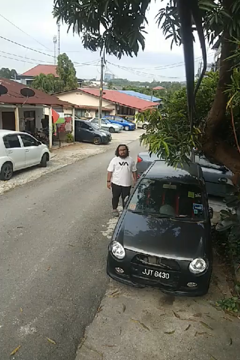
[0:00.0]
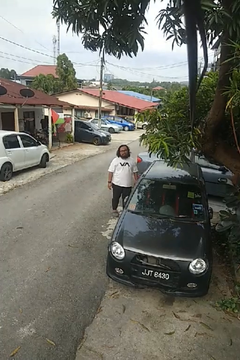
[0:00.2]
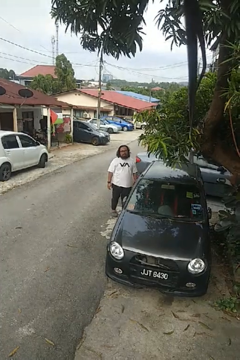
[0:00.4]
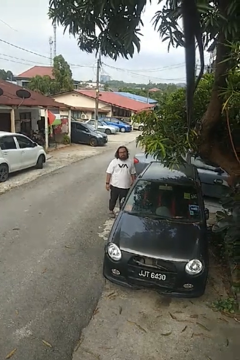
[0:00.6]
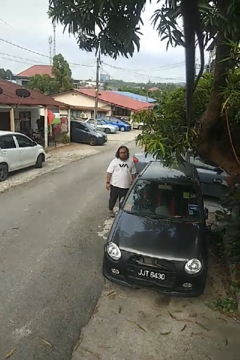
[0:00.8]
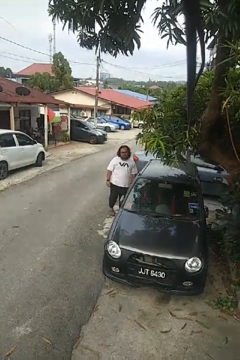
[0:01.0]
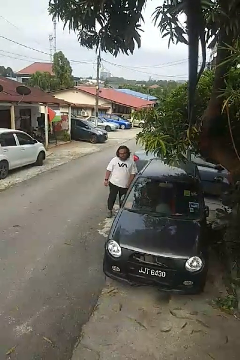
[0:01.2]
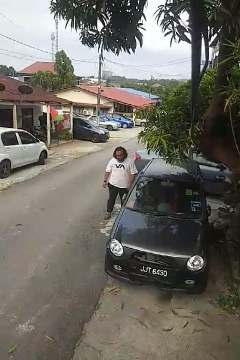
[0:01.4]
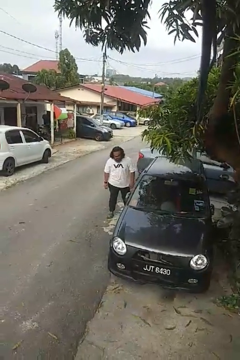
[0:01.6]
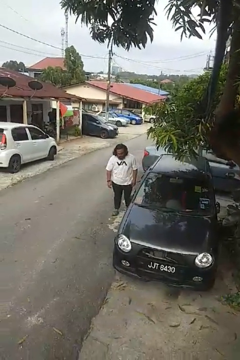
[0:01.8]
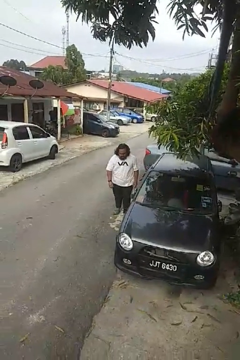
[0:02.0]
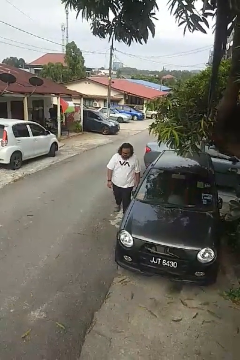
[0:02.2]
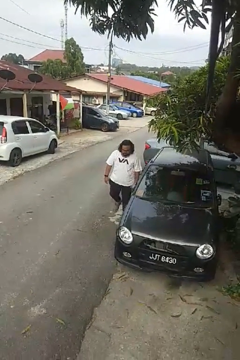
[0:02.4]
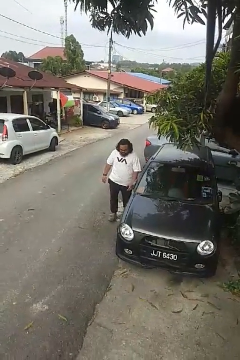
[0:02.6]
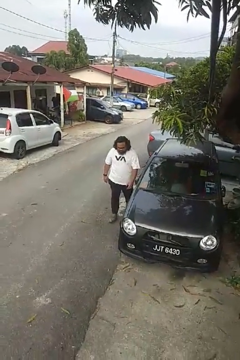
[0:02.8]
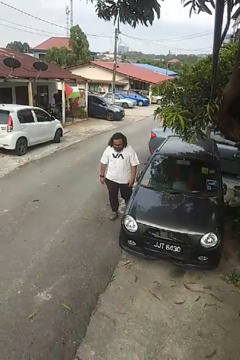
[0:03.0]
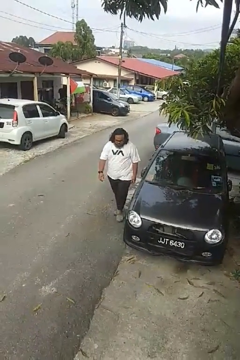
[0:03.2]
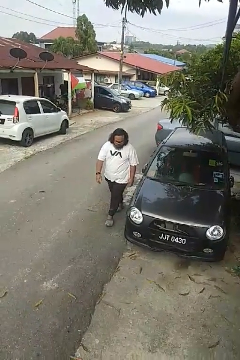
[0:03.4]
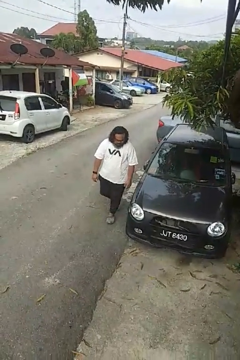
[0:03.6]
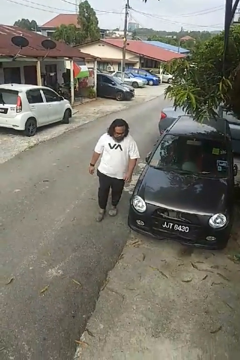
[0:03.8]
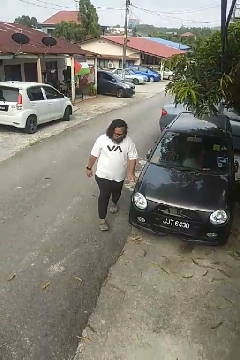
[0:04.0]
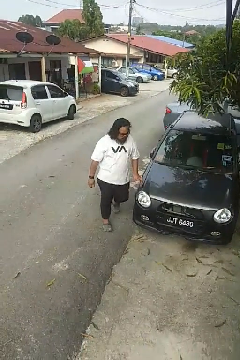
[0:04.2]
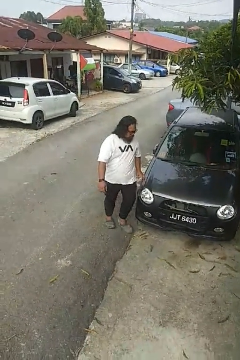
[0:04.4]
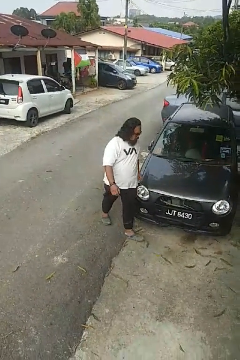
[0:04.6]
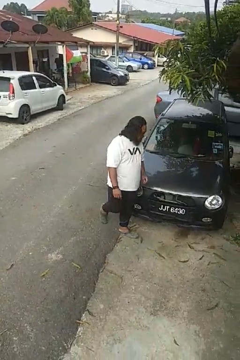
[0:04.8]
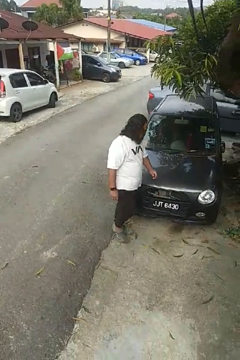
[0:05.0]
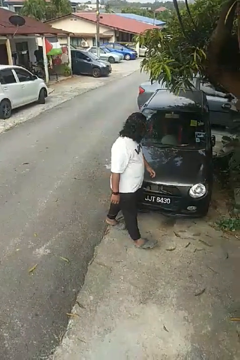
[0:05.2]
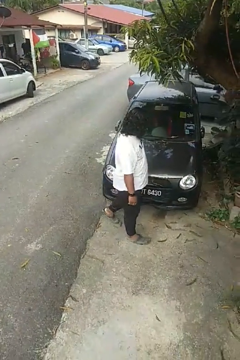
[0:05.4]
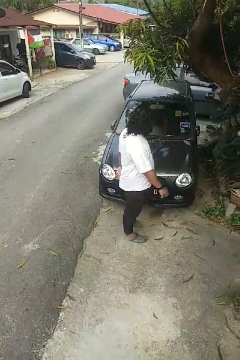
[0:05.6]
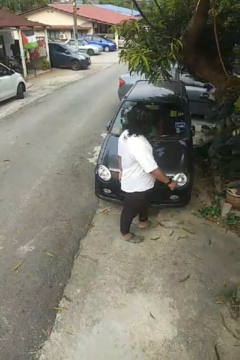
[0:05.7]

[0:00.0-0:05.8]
person walks around car

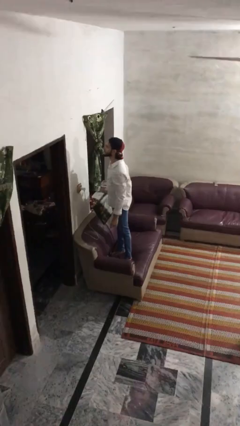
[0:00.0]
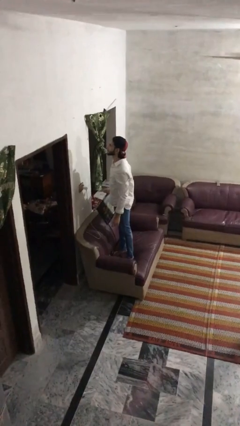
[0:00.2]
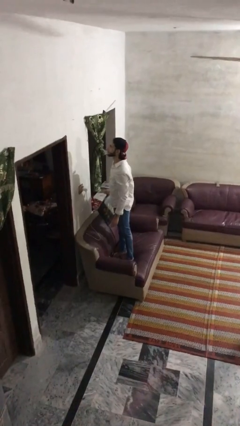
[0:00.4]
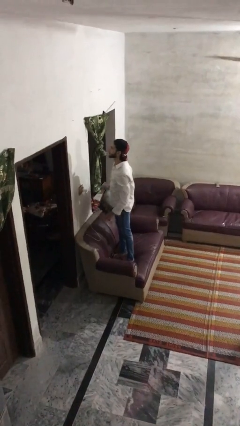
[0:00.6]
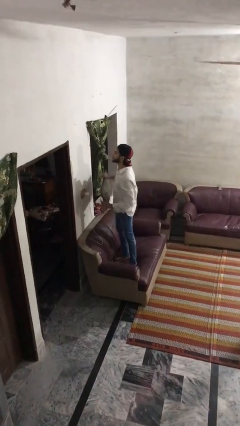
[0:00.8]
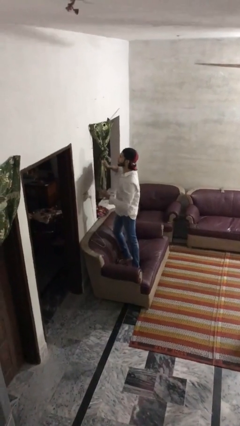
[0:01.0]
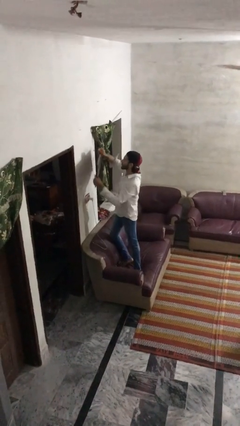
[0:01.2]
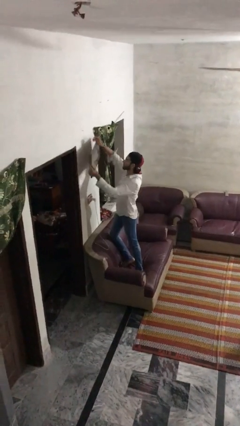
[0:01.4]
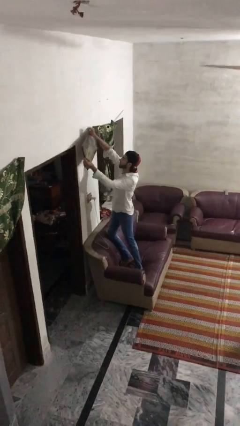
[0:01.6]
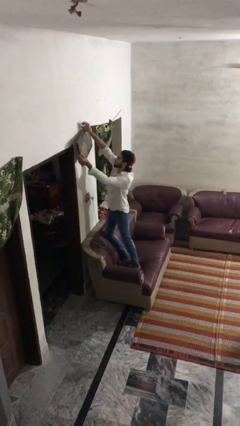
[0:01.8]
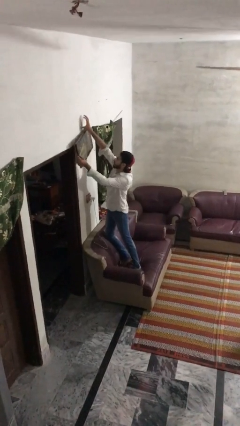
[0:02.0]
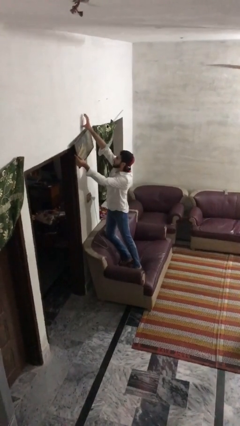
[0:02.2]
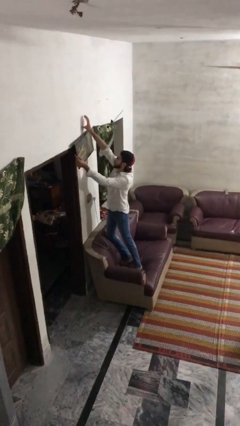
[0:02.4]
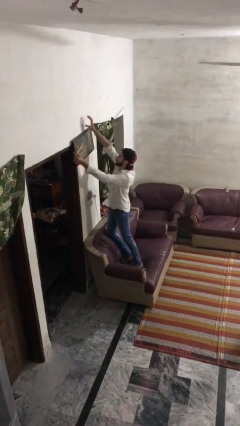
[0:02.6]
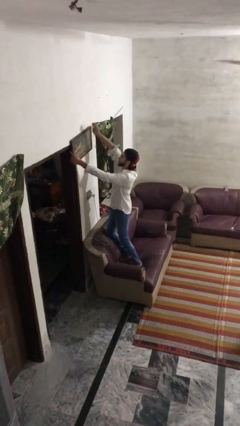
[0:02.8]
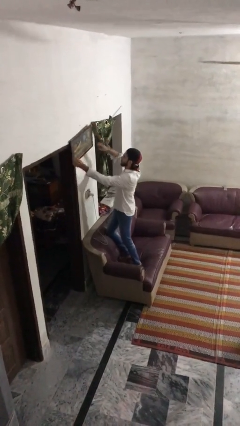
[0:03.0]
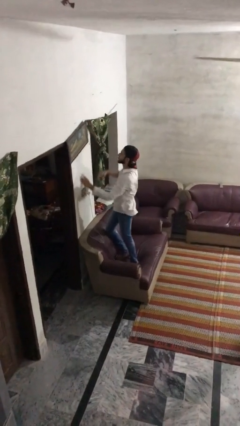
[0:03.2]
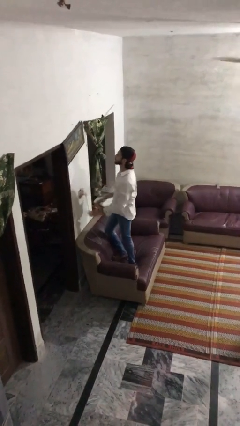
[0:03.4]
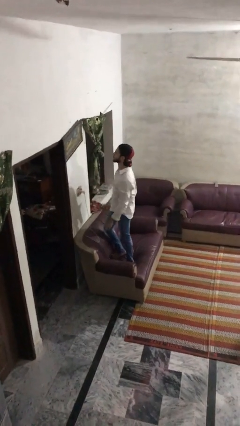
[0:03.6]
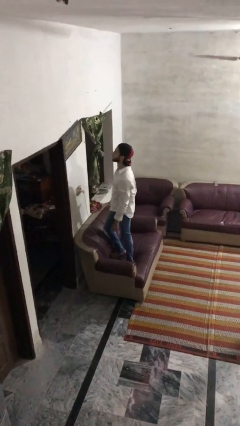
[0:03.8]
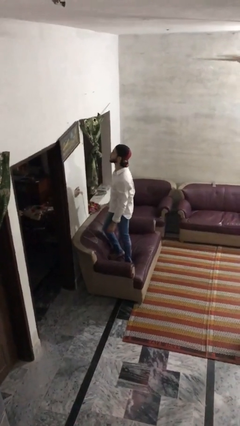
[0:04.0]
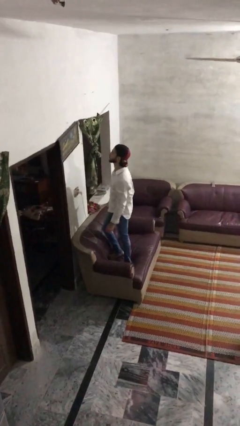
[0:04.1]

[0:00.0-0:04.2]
person puts up picture frame

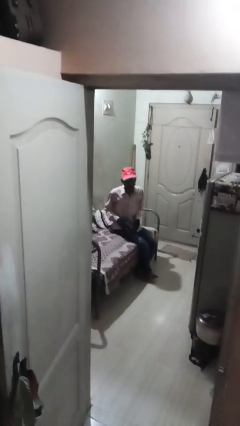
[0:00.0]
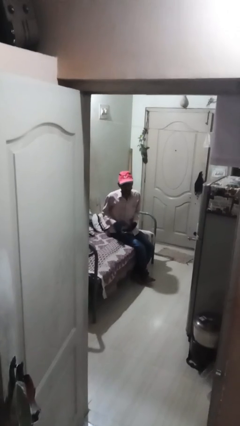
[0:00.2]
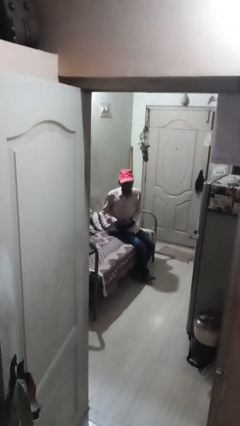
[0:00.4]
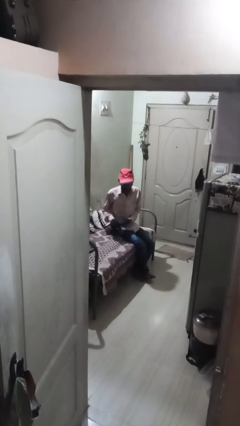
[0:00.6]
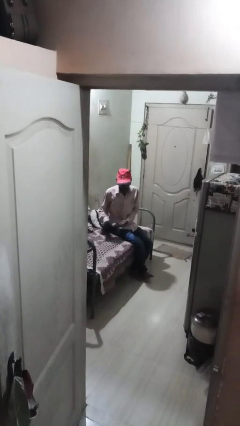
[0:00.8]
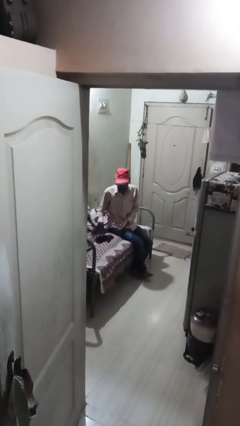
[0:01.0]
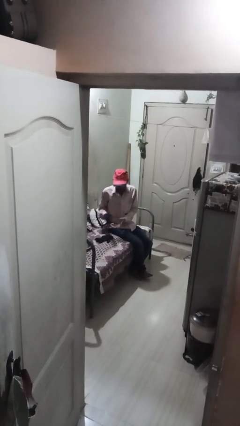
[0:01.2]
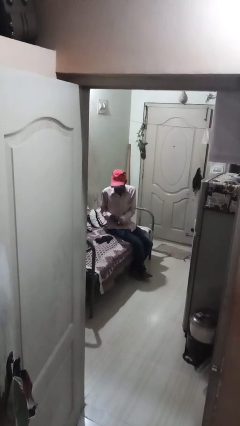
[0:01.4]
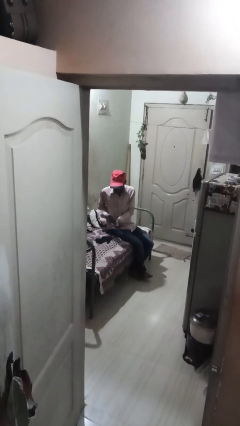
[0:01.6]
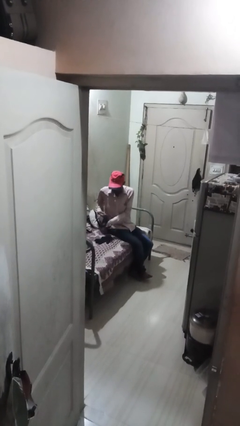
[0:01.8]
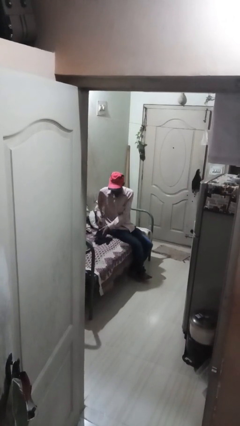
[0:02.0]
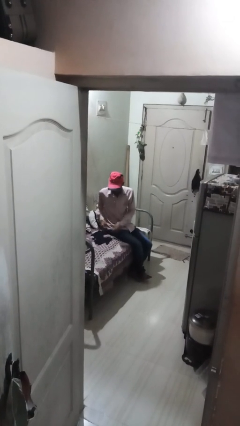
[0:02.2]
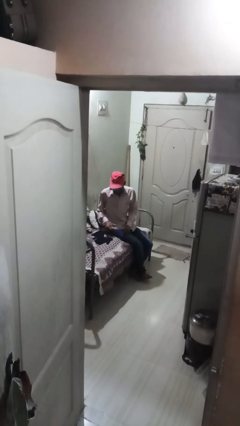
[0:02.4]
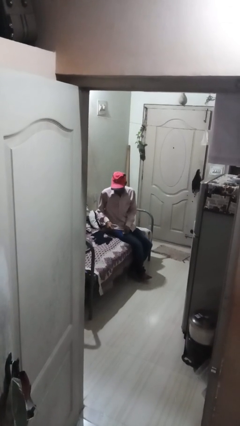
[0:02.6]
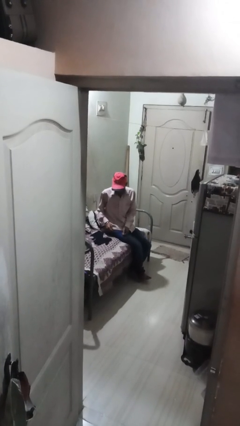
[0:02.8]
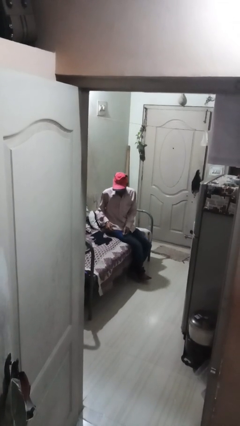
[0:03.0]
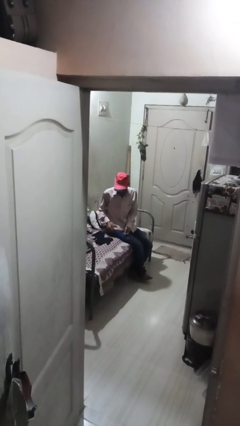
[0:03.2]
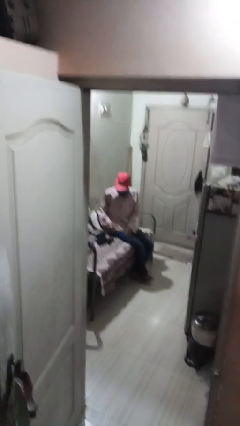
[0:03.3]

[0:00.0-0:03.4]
person takes off gloves

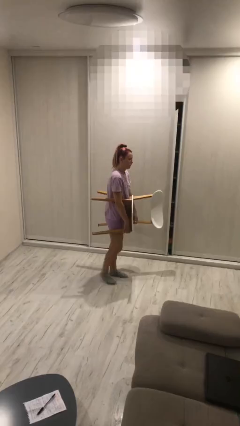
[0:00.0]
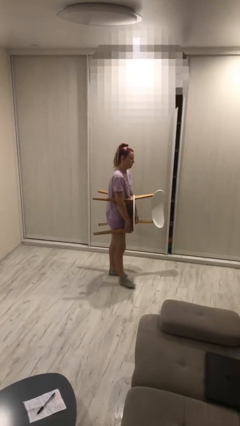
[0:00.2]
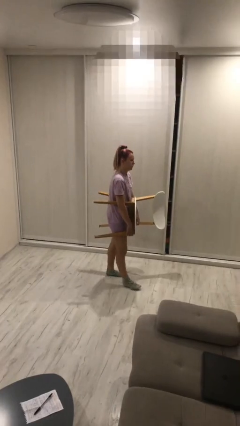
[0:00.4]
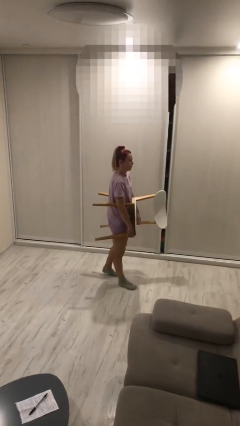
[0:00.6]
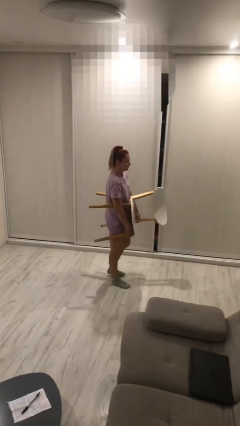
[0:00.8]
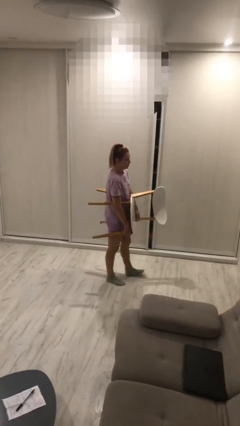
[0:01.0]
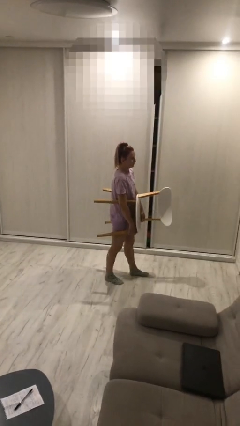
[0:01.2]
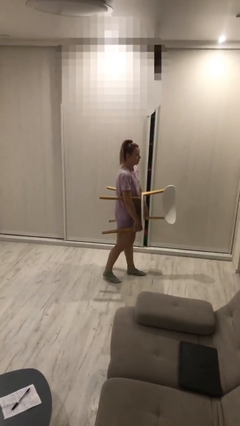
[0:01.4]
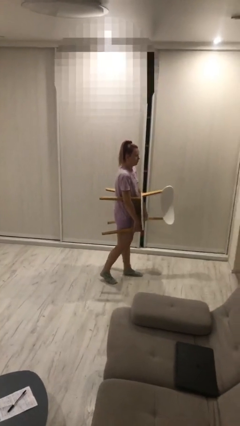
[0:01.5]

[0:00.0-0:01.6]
person carries furniture

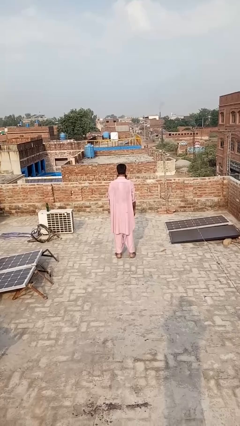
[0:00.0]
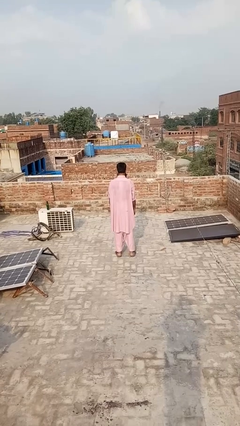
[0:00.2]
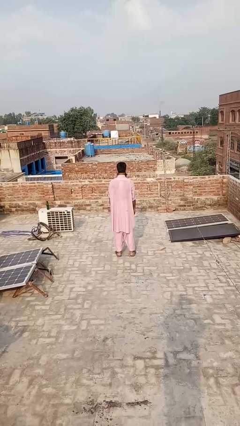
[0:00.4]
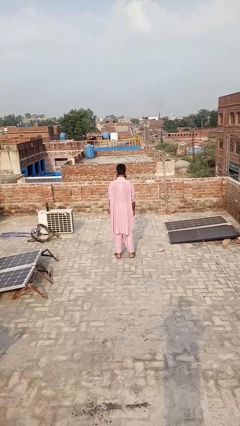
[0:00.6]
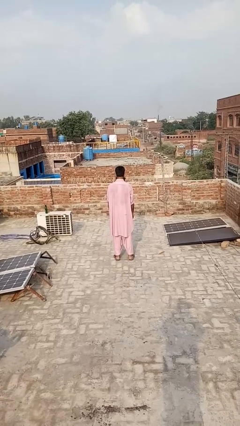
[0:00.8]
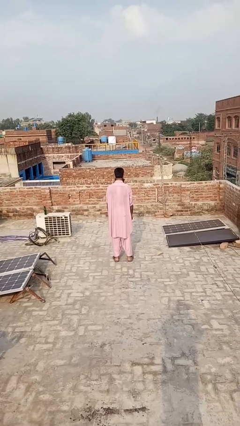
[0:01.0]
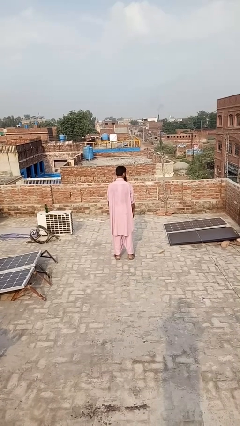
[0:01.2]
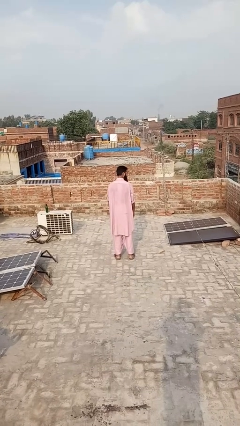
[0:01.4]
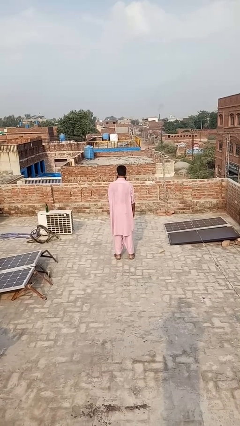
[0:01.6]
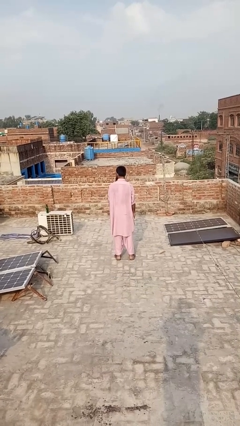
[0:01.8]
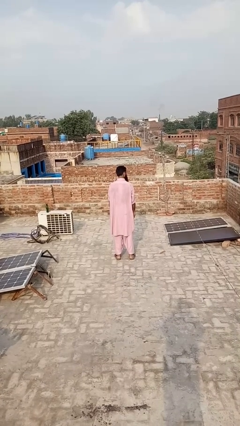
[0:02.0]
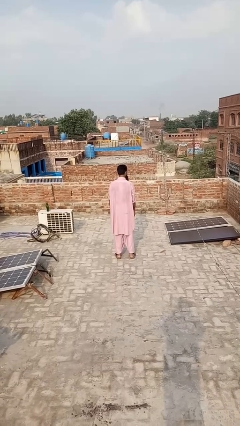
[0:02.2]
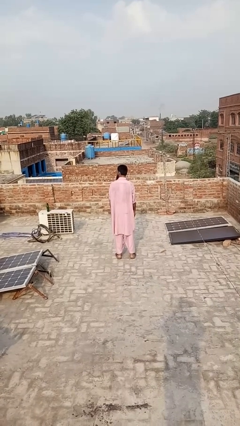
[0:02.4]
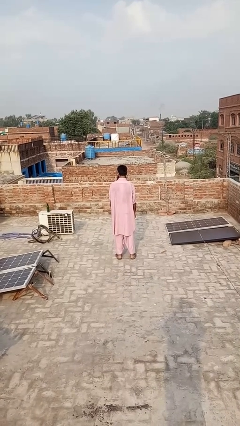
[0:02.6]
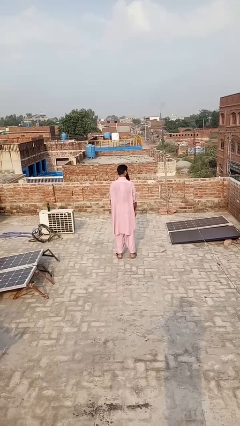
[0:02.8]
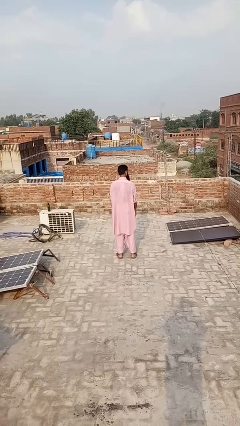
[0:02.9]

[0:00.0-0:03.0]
person shakes head

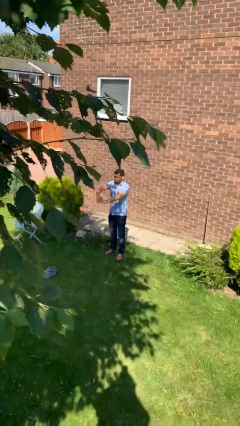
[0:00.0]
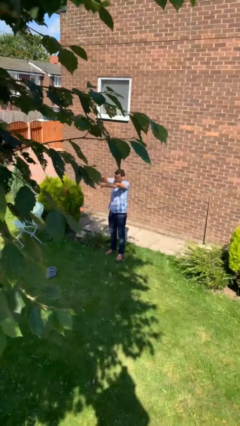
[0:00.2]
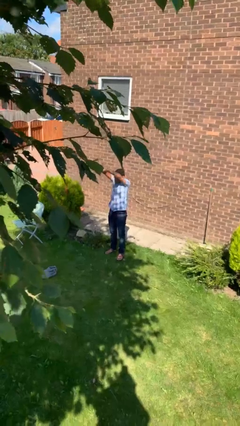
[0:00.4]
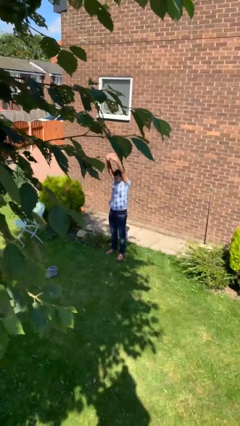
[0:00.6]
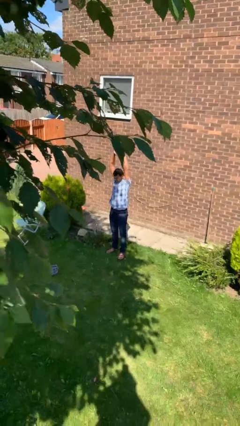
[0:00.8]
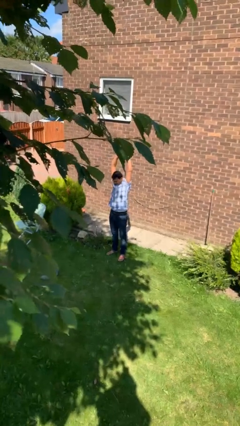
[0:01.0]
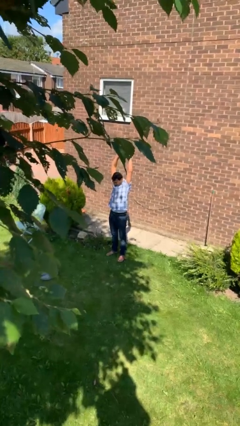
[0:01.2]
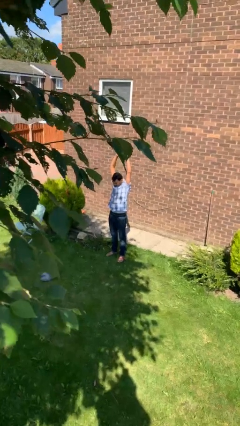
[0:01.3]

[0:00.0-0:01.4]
person stretches arms over head
